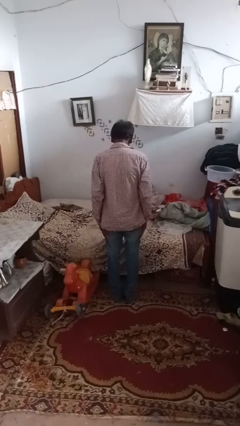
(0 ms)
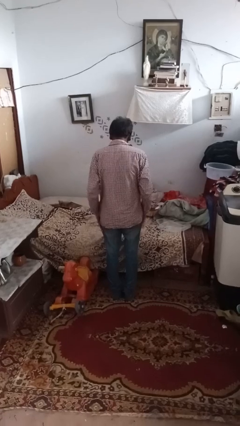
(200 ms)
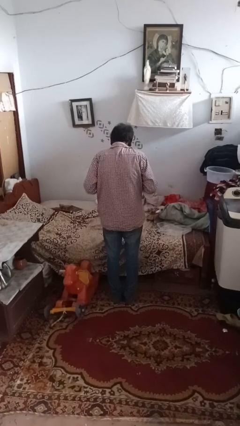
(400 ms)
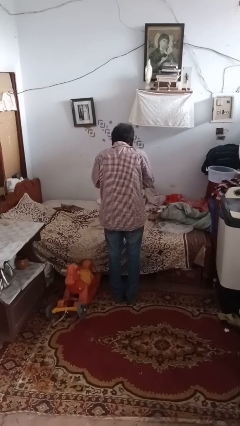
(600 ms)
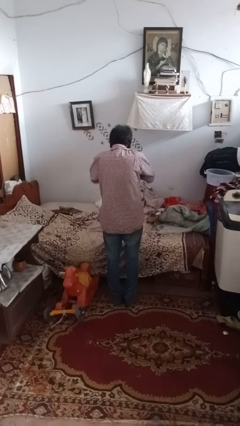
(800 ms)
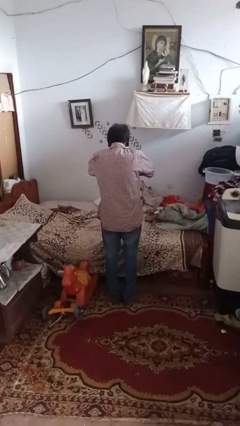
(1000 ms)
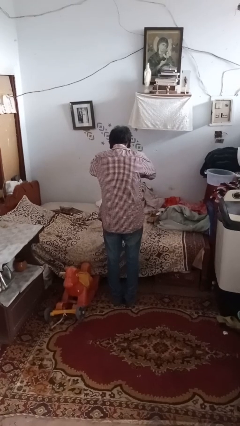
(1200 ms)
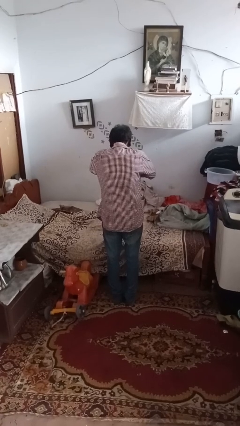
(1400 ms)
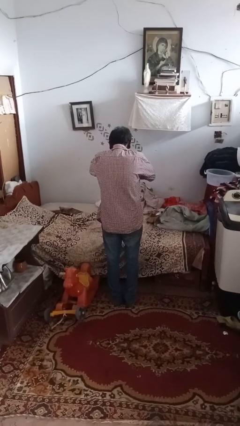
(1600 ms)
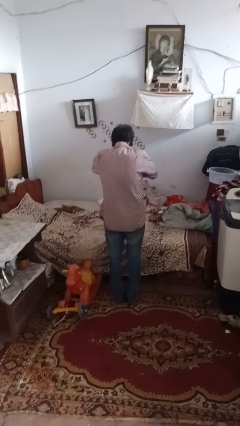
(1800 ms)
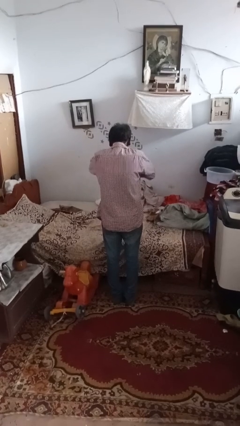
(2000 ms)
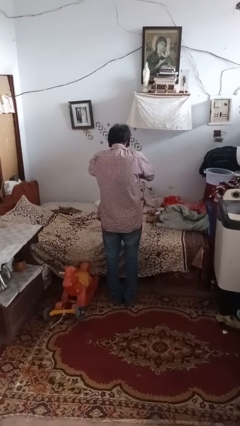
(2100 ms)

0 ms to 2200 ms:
person sneezes into hand

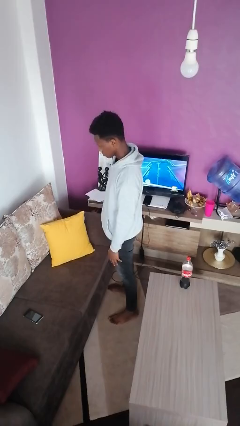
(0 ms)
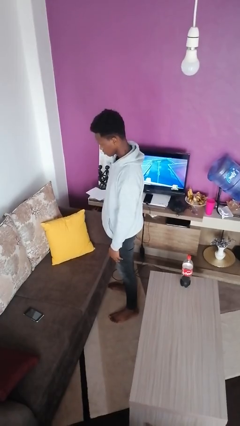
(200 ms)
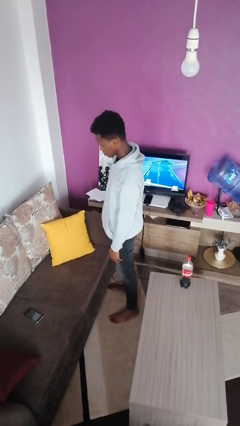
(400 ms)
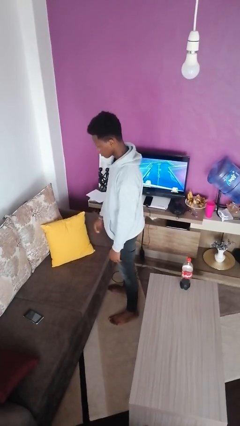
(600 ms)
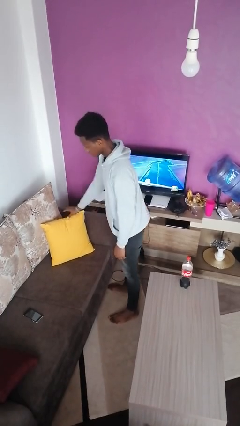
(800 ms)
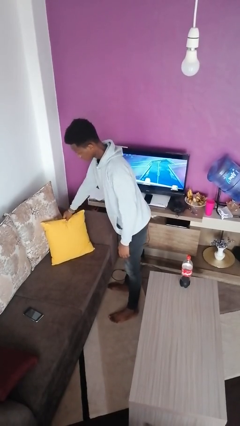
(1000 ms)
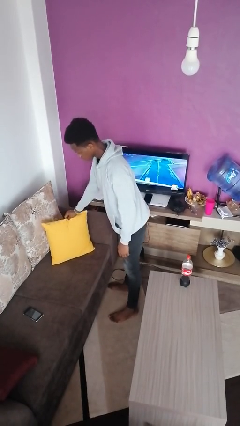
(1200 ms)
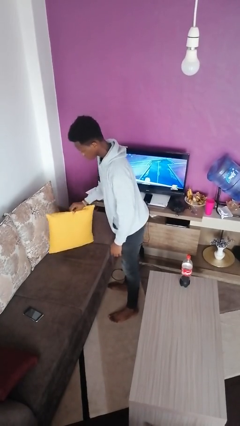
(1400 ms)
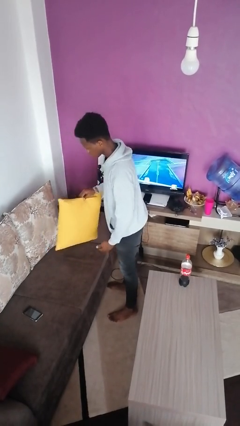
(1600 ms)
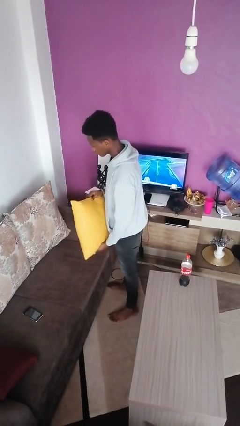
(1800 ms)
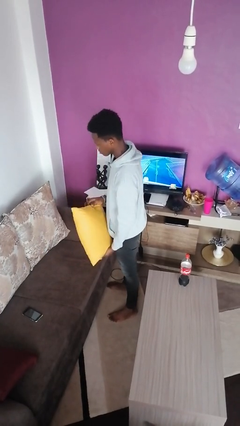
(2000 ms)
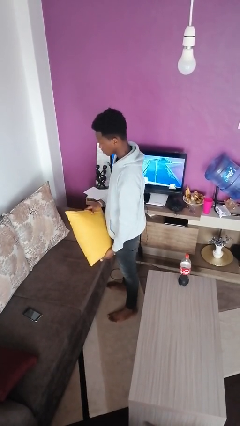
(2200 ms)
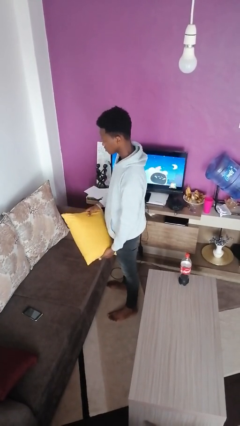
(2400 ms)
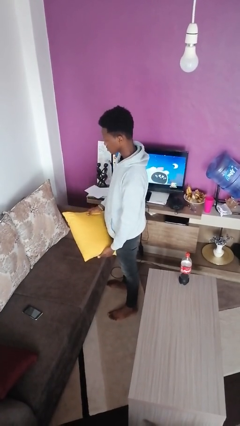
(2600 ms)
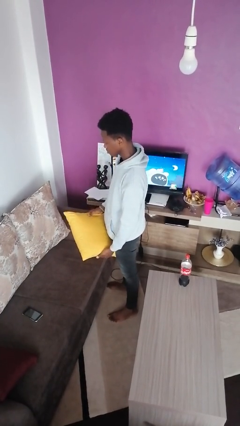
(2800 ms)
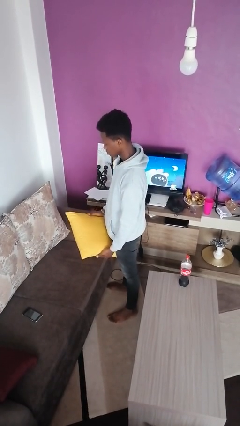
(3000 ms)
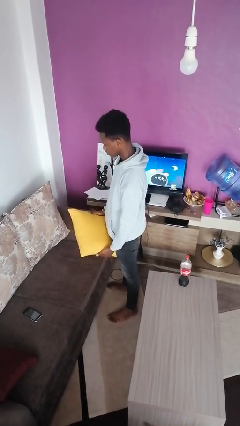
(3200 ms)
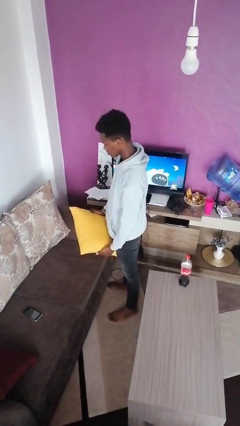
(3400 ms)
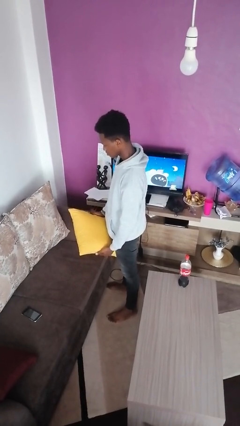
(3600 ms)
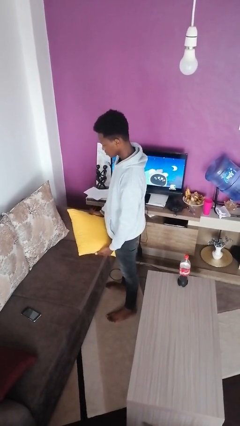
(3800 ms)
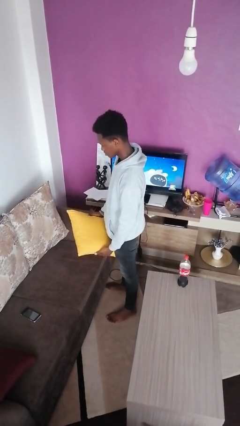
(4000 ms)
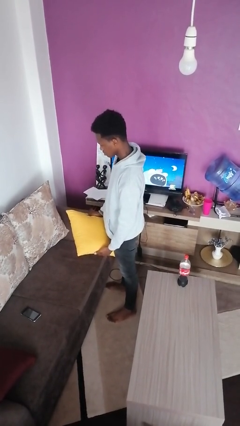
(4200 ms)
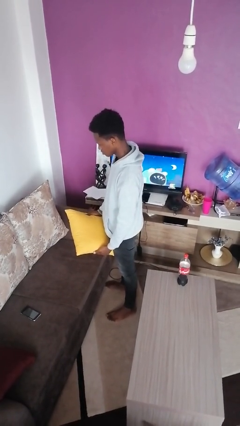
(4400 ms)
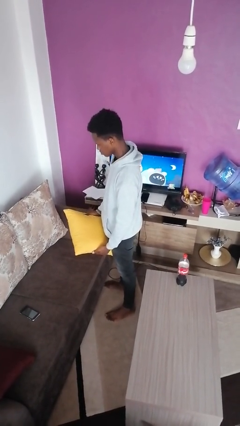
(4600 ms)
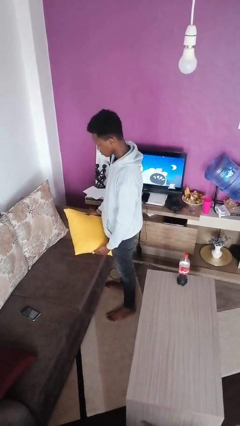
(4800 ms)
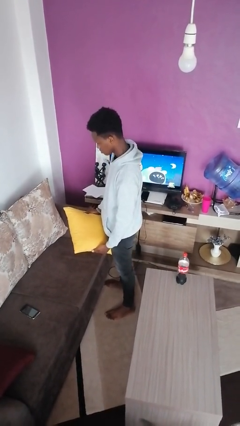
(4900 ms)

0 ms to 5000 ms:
person picks up object from couch

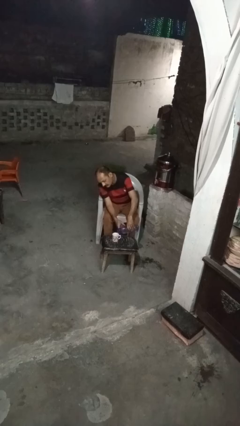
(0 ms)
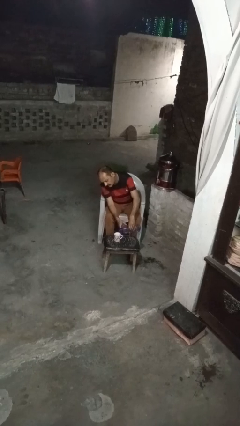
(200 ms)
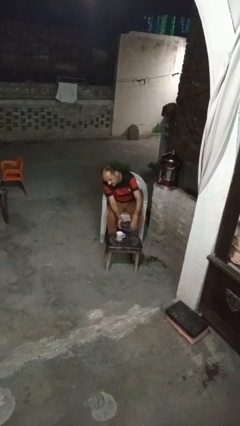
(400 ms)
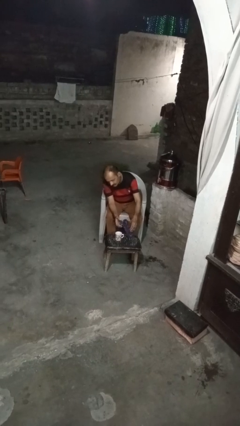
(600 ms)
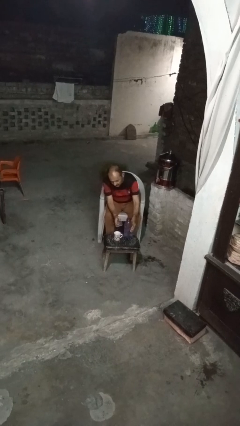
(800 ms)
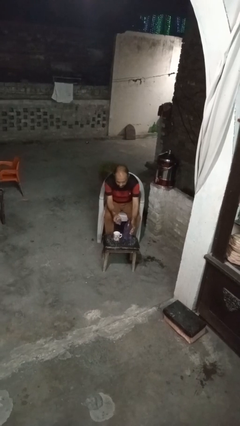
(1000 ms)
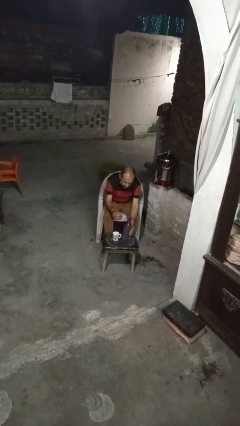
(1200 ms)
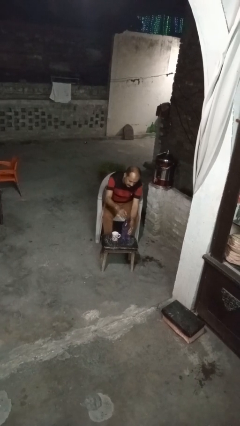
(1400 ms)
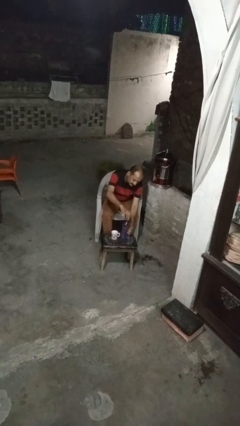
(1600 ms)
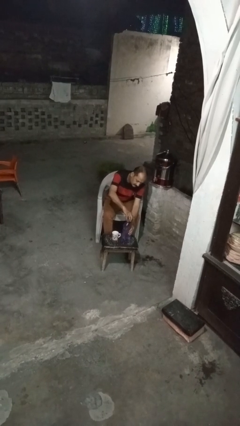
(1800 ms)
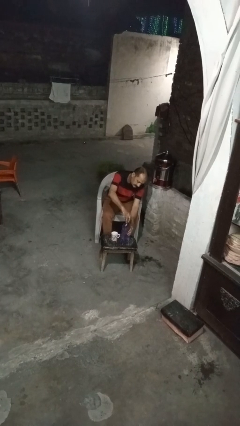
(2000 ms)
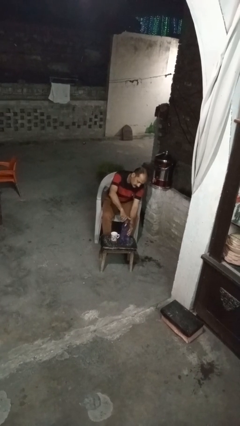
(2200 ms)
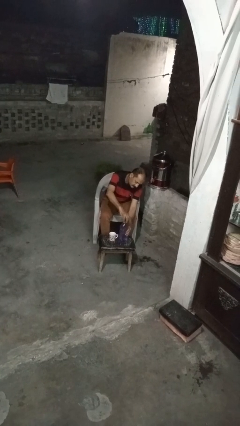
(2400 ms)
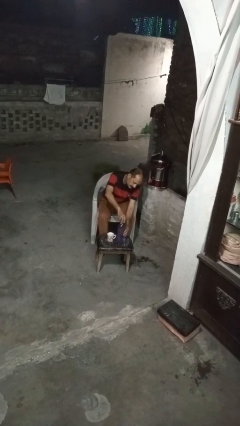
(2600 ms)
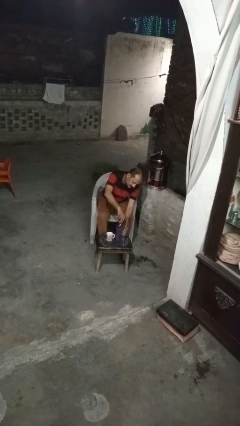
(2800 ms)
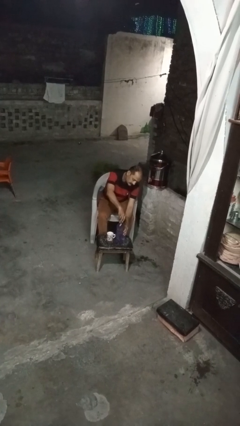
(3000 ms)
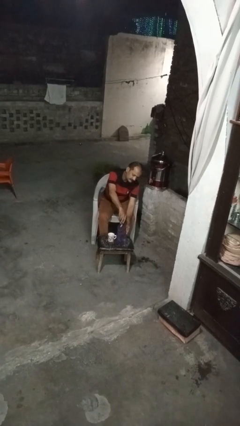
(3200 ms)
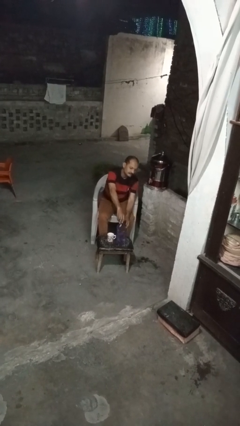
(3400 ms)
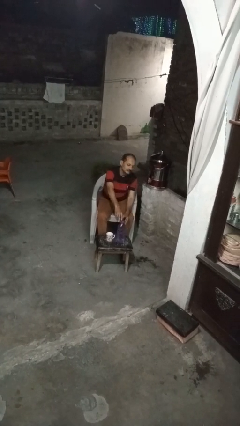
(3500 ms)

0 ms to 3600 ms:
person screws lid to bottle

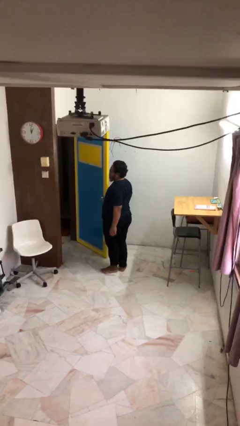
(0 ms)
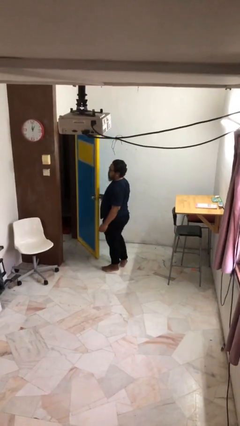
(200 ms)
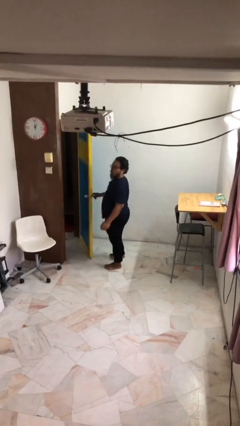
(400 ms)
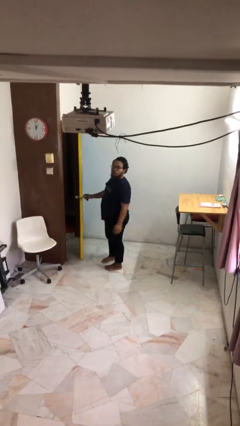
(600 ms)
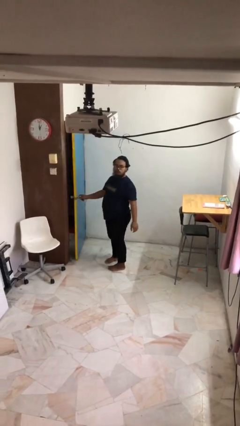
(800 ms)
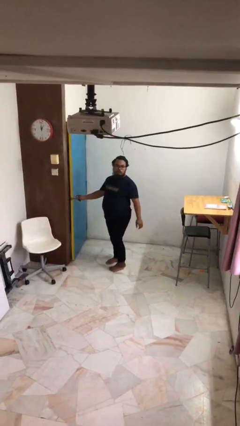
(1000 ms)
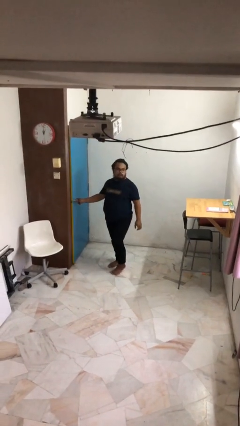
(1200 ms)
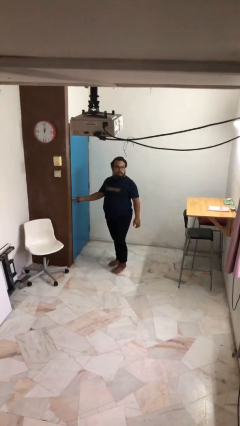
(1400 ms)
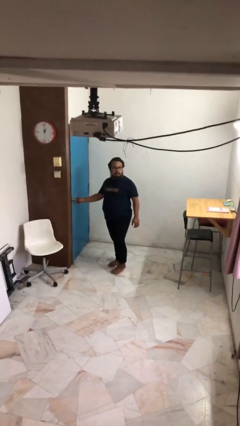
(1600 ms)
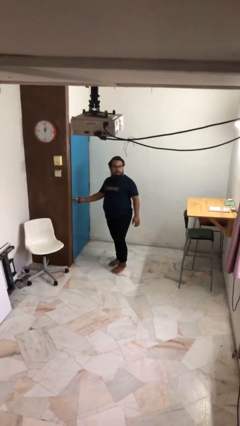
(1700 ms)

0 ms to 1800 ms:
person closes facility door

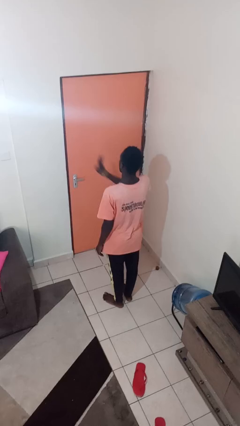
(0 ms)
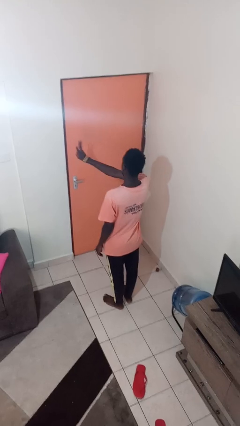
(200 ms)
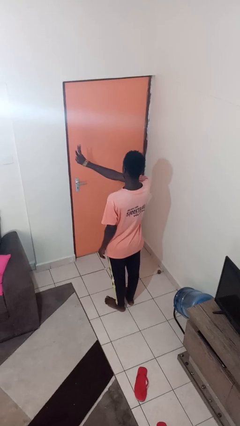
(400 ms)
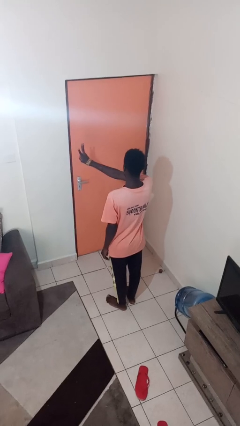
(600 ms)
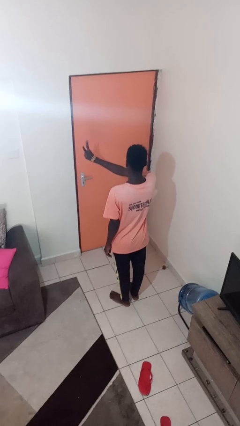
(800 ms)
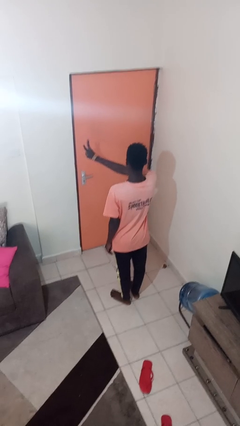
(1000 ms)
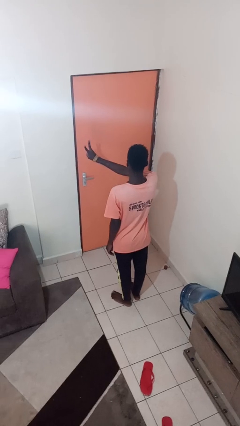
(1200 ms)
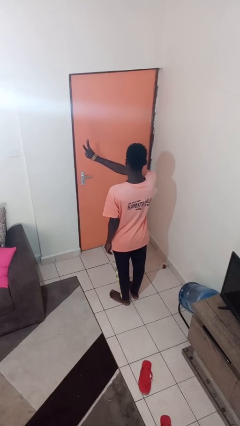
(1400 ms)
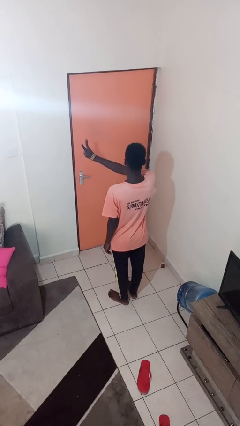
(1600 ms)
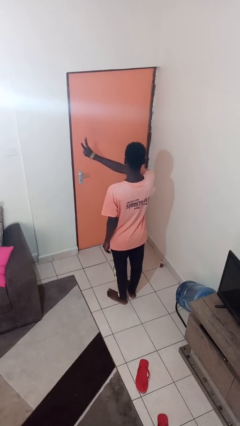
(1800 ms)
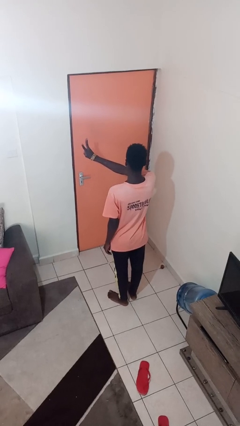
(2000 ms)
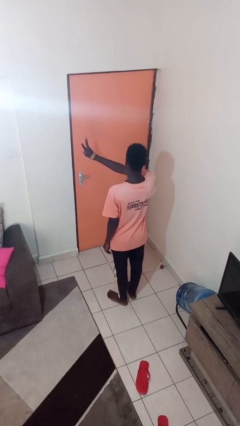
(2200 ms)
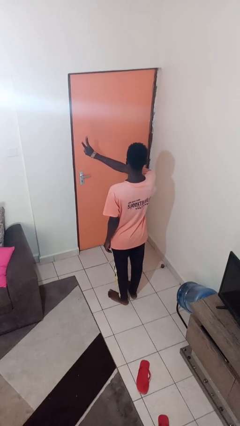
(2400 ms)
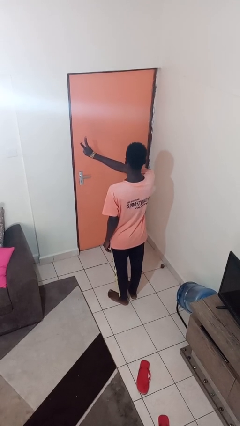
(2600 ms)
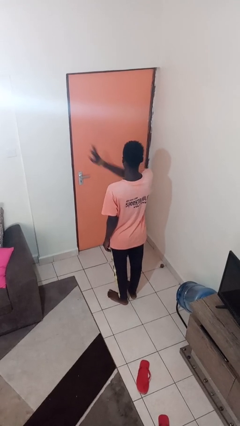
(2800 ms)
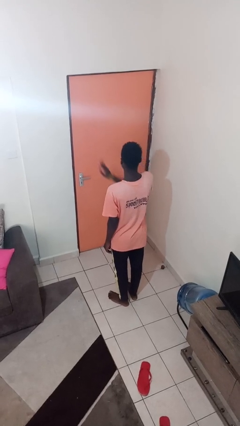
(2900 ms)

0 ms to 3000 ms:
person gestures number three

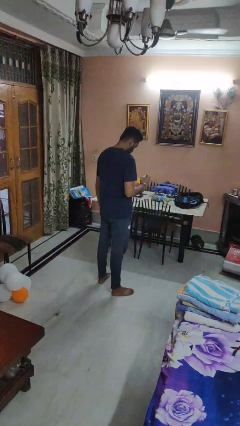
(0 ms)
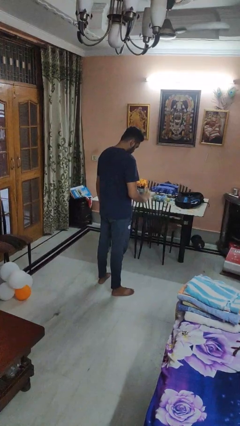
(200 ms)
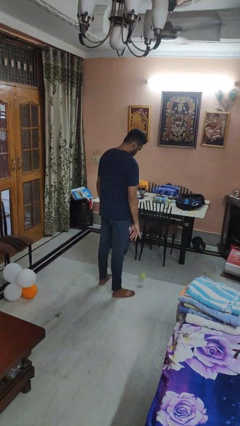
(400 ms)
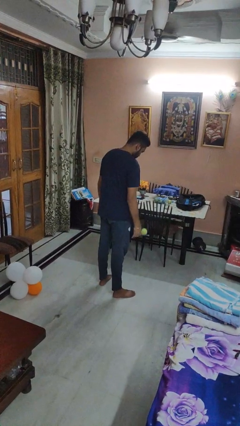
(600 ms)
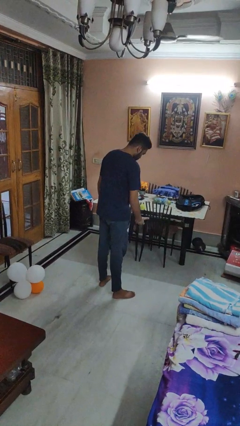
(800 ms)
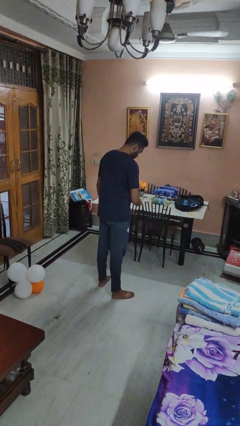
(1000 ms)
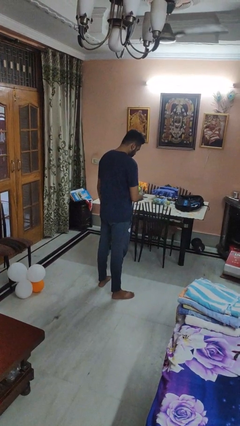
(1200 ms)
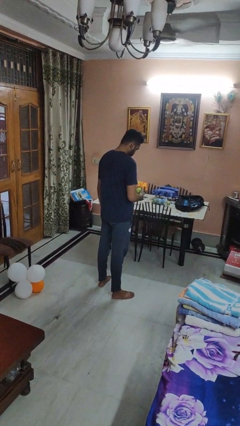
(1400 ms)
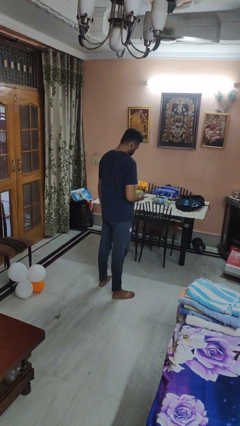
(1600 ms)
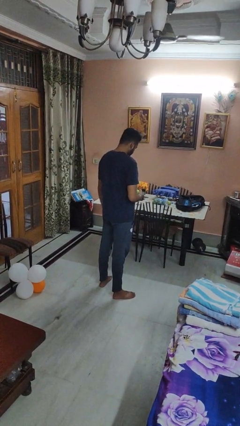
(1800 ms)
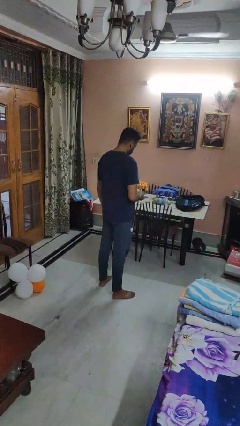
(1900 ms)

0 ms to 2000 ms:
person bounces ball on floor
